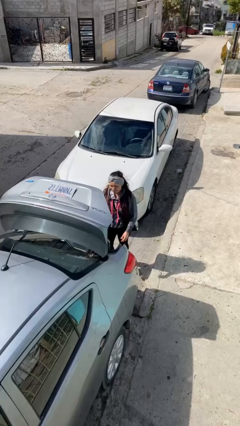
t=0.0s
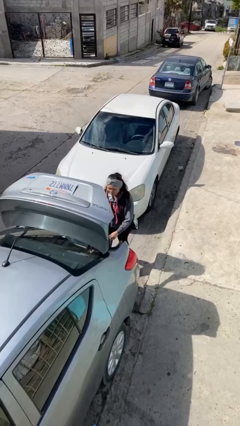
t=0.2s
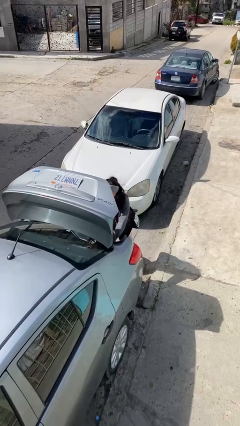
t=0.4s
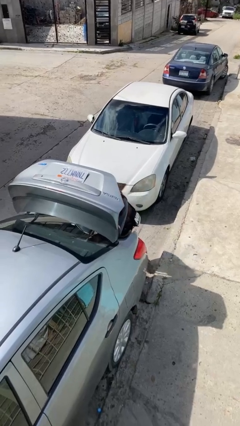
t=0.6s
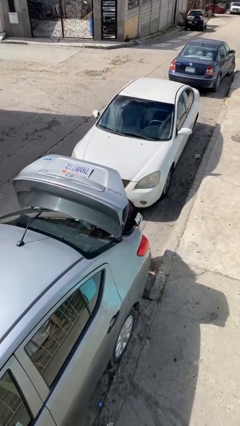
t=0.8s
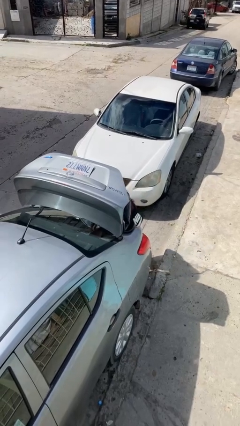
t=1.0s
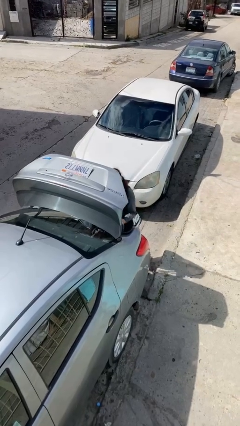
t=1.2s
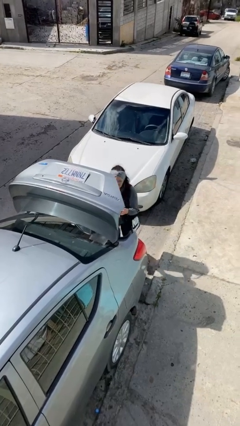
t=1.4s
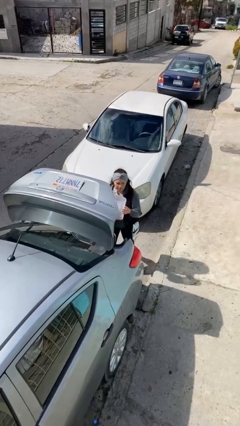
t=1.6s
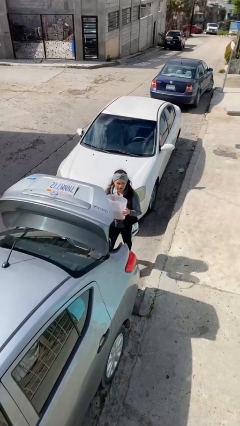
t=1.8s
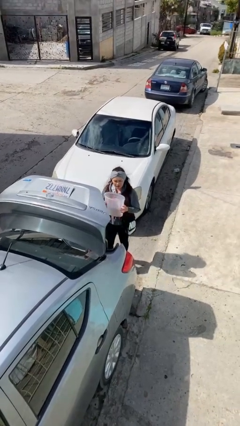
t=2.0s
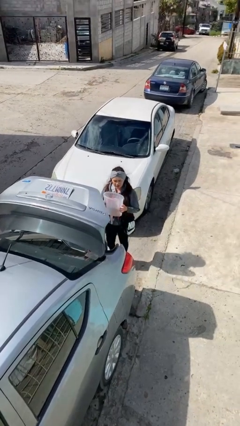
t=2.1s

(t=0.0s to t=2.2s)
person unloads car

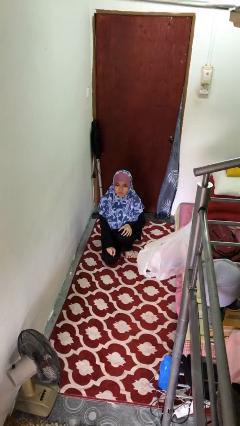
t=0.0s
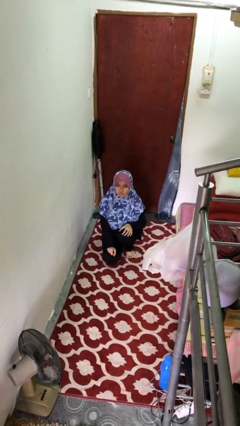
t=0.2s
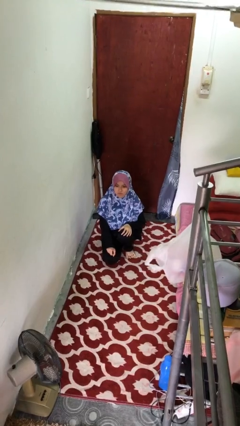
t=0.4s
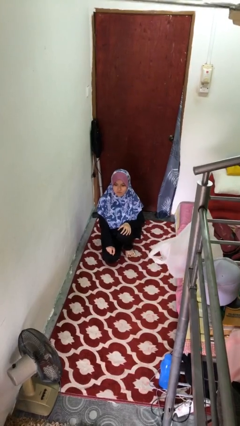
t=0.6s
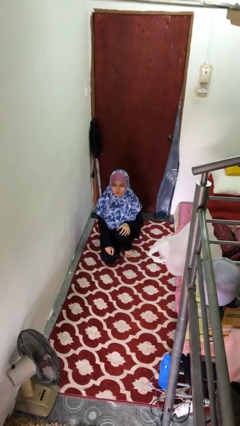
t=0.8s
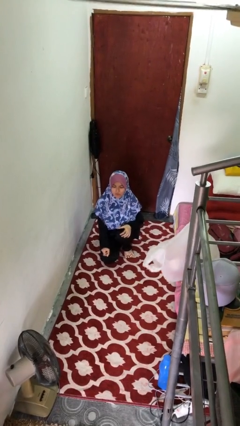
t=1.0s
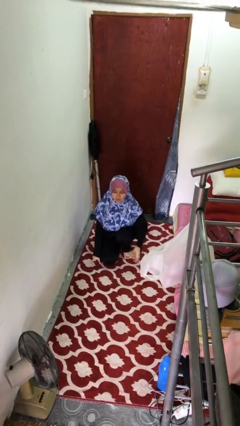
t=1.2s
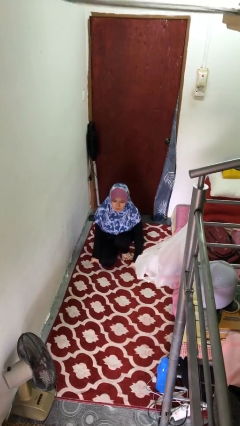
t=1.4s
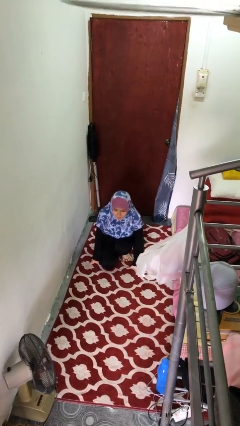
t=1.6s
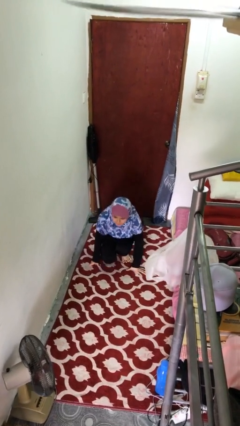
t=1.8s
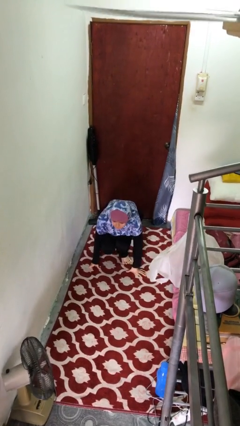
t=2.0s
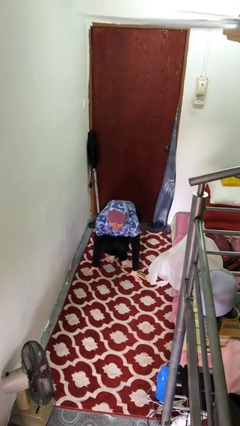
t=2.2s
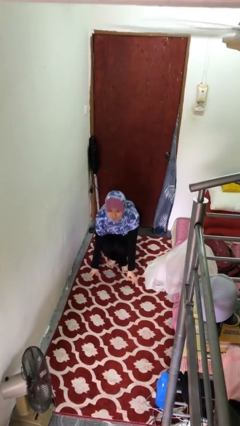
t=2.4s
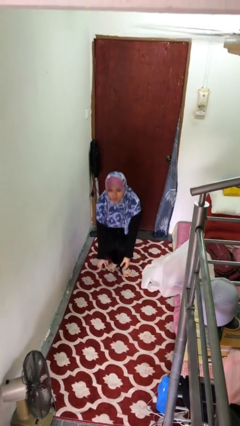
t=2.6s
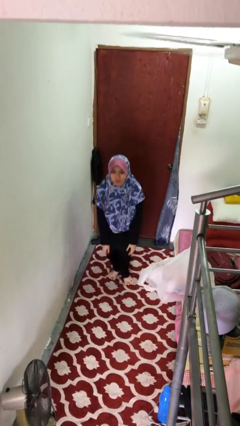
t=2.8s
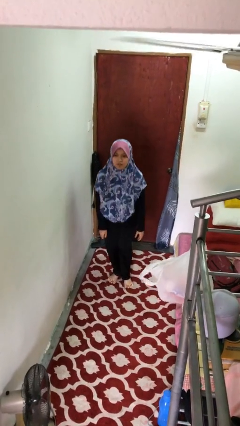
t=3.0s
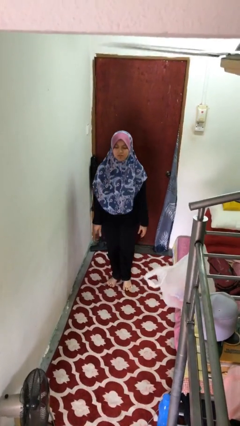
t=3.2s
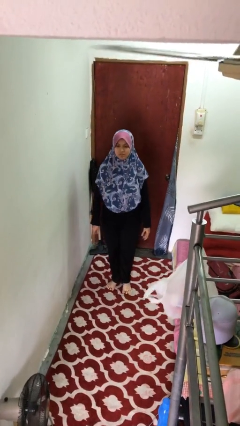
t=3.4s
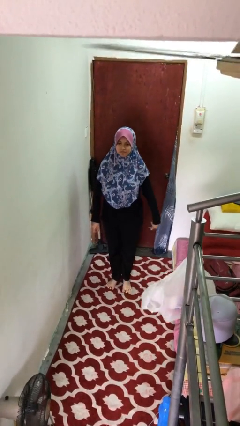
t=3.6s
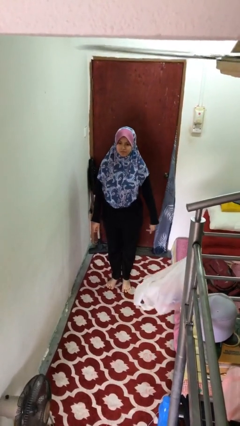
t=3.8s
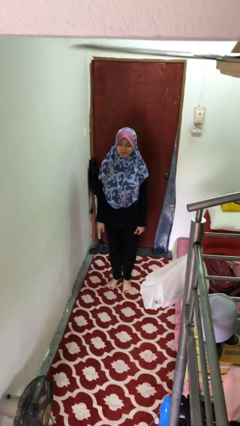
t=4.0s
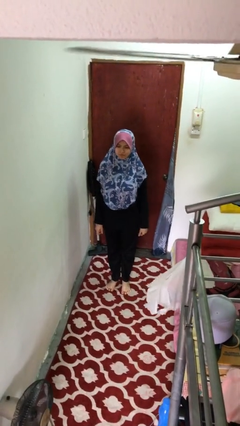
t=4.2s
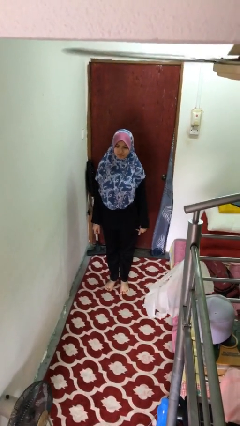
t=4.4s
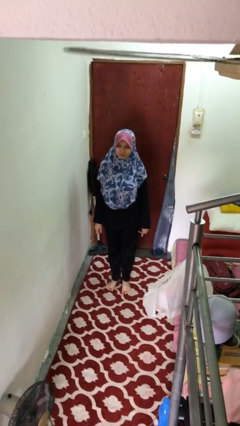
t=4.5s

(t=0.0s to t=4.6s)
person stands up from floor

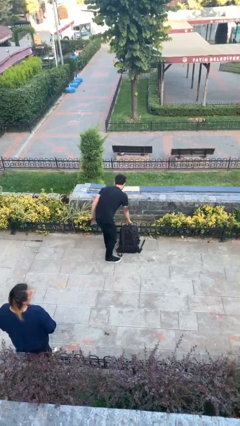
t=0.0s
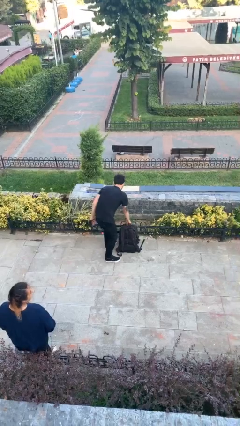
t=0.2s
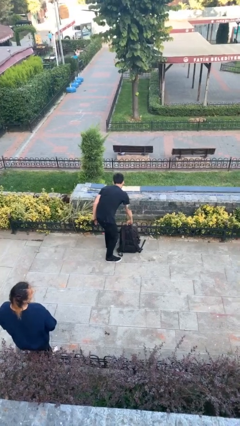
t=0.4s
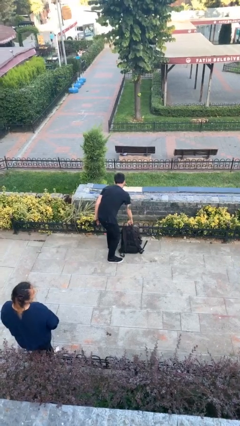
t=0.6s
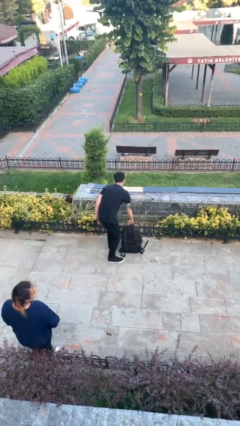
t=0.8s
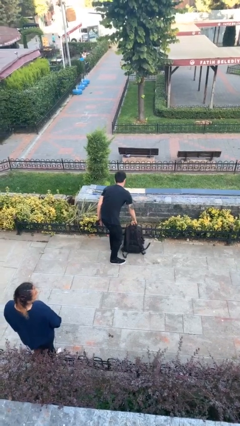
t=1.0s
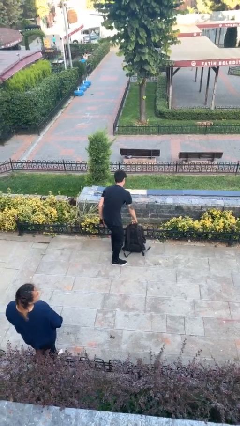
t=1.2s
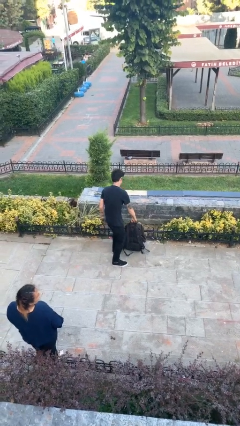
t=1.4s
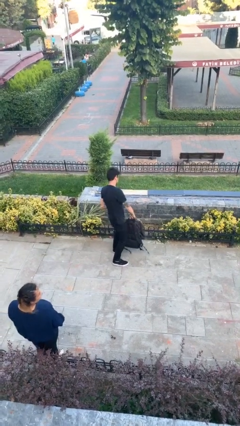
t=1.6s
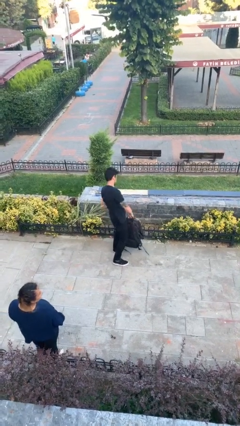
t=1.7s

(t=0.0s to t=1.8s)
person picks up object from floor

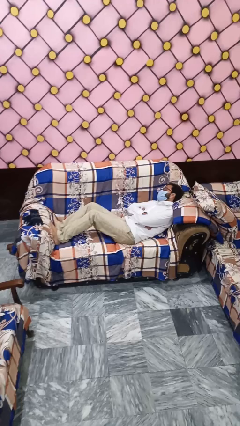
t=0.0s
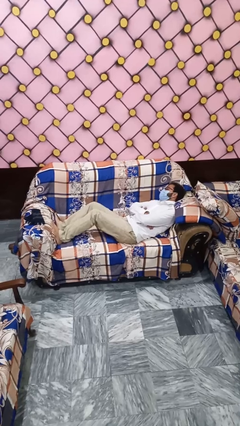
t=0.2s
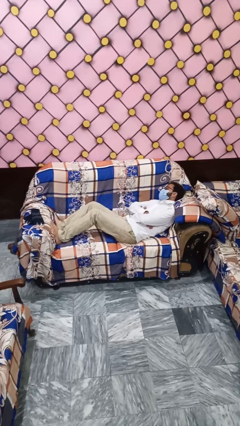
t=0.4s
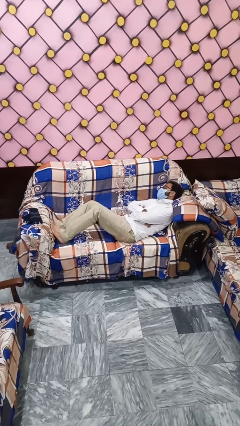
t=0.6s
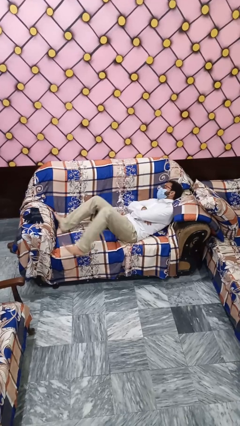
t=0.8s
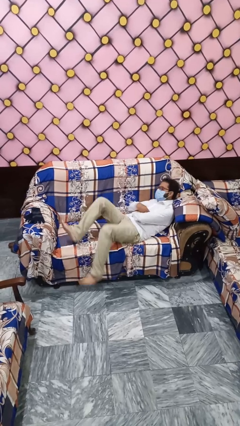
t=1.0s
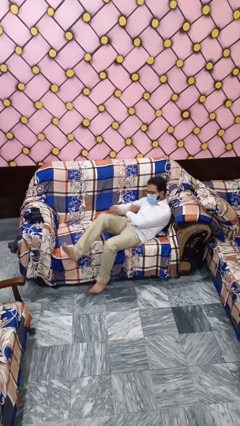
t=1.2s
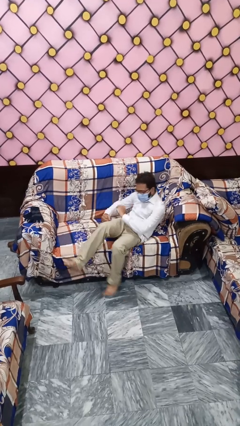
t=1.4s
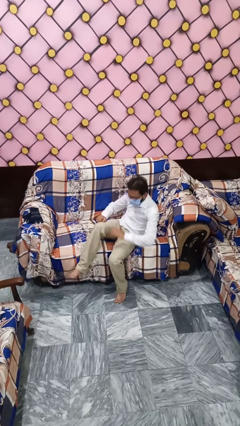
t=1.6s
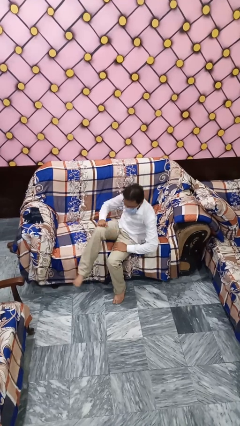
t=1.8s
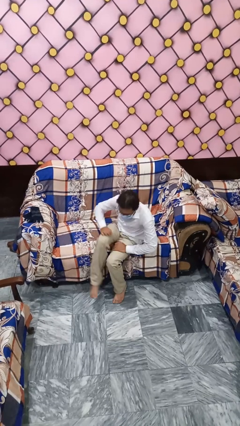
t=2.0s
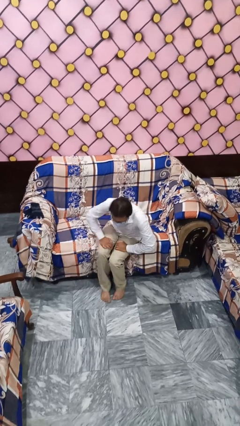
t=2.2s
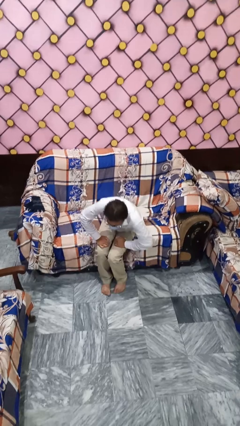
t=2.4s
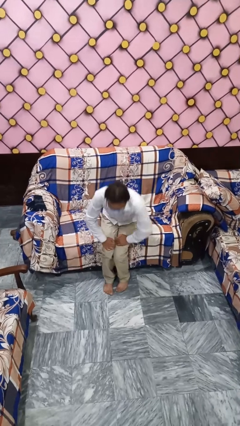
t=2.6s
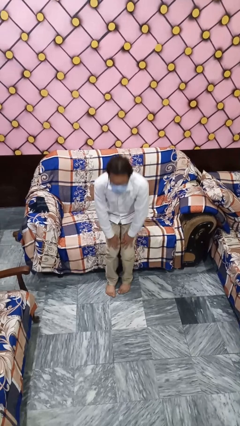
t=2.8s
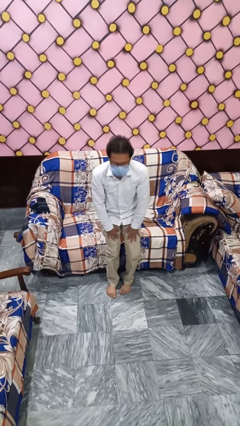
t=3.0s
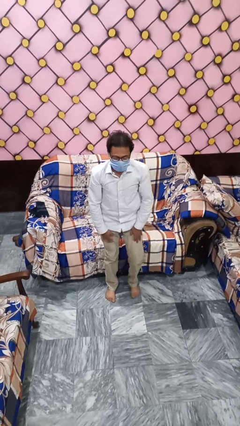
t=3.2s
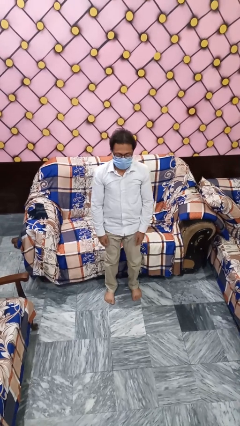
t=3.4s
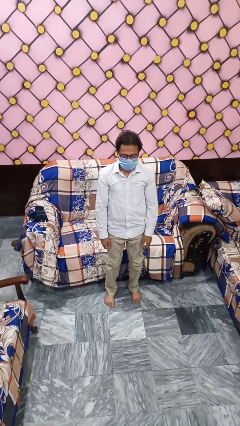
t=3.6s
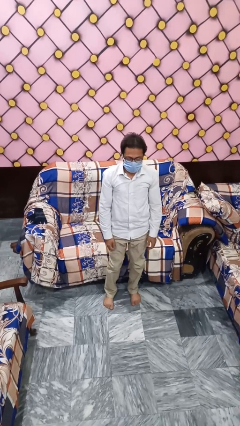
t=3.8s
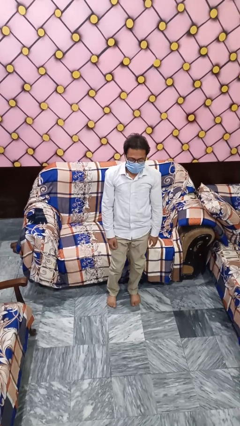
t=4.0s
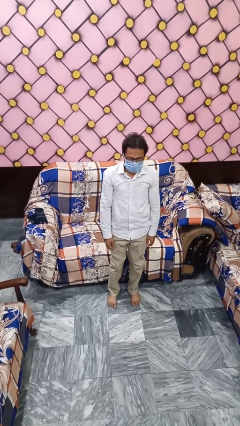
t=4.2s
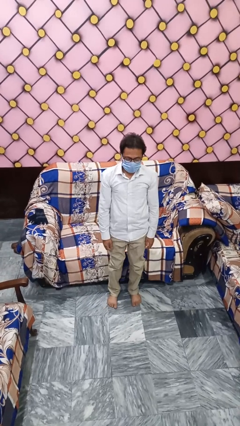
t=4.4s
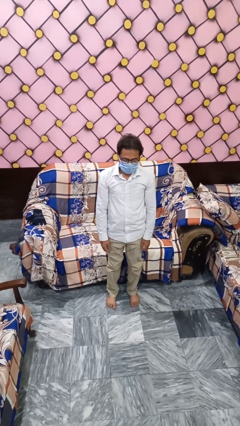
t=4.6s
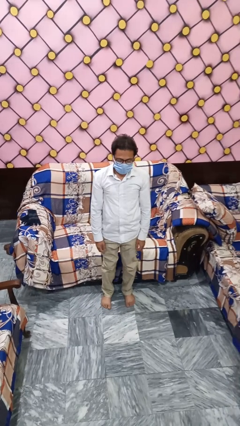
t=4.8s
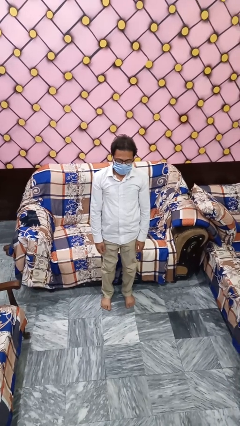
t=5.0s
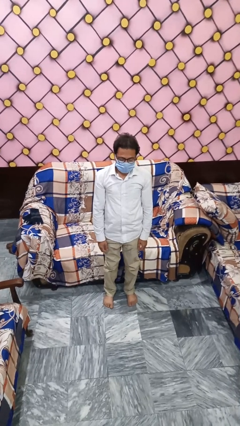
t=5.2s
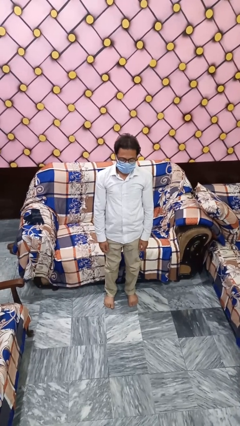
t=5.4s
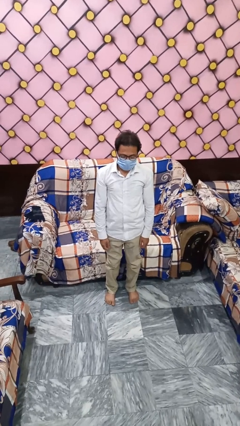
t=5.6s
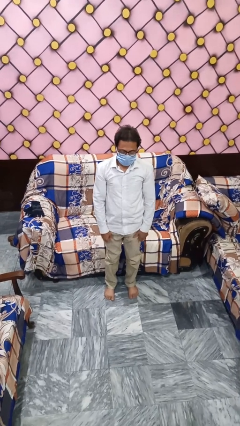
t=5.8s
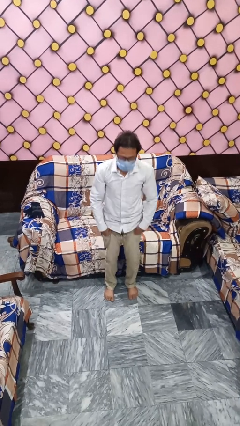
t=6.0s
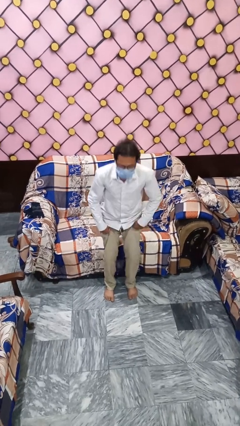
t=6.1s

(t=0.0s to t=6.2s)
person stands up

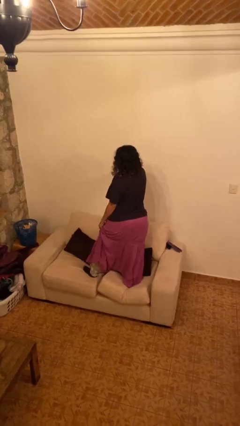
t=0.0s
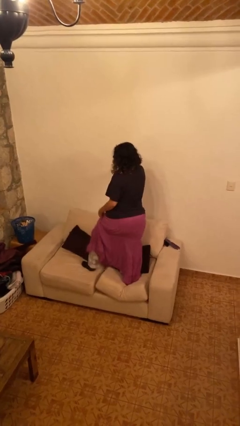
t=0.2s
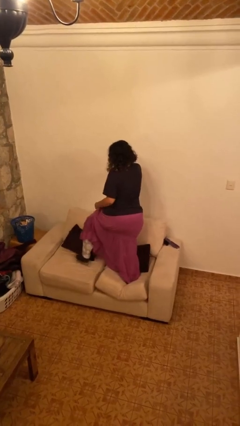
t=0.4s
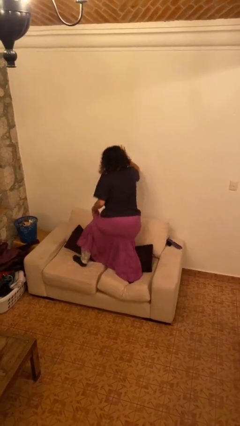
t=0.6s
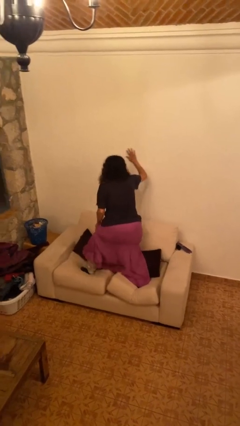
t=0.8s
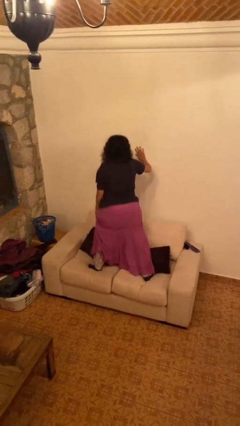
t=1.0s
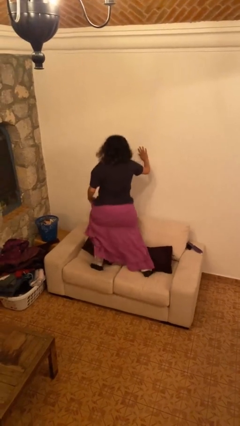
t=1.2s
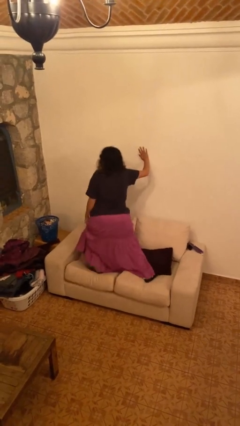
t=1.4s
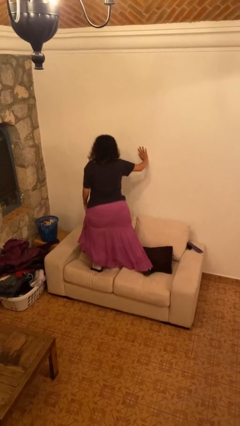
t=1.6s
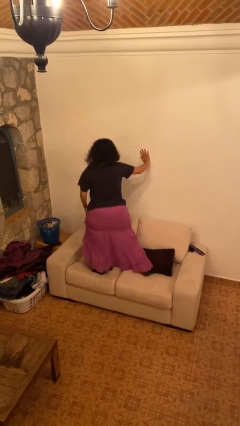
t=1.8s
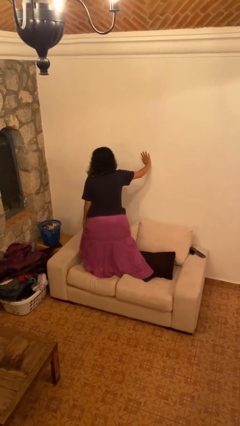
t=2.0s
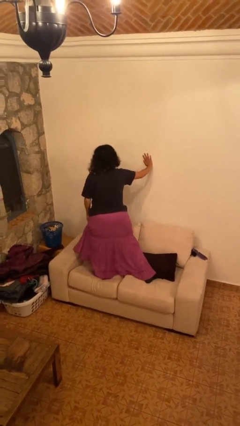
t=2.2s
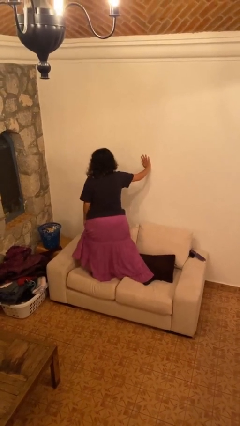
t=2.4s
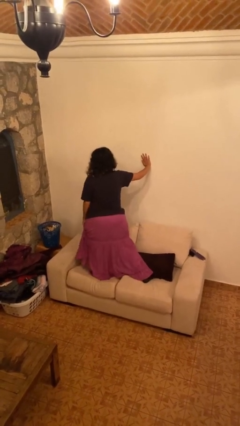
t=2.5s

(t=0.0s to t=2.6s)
person jumps on couch

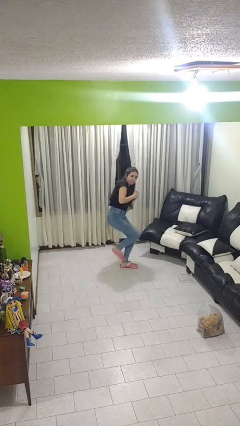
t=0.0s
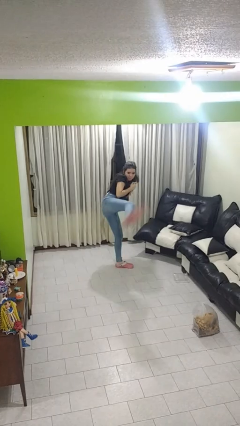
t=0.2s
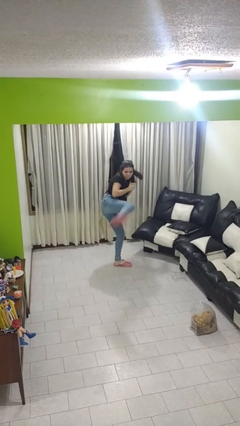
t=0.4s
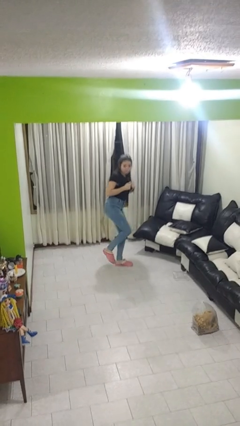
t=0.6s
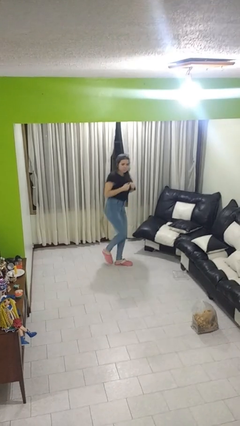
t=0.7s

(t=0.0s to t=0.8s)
person karate kicks
